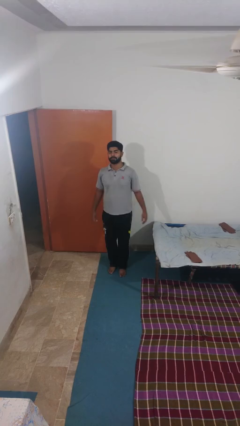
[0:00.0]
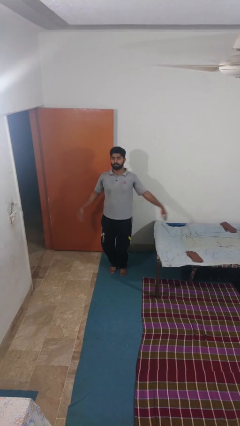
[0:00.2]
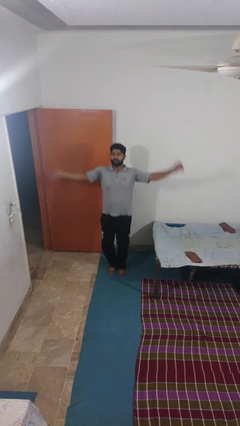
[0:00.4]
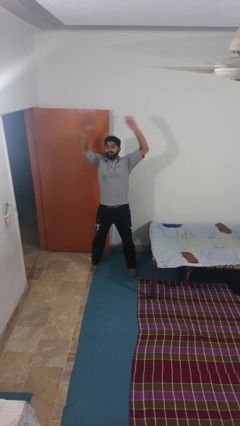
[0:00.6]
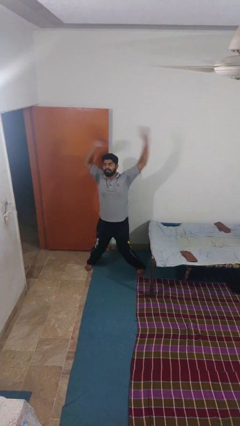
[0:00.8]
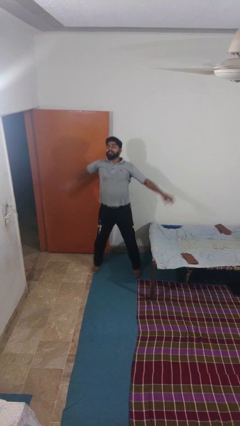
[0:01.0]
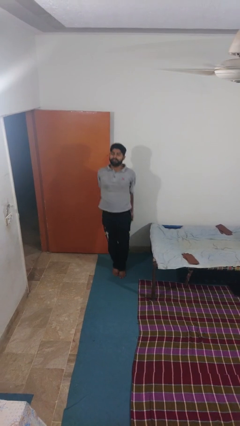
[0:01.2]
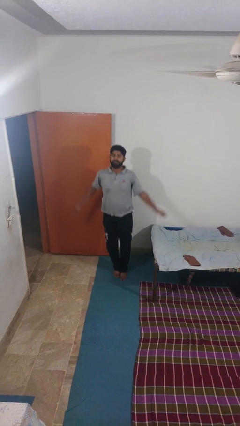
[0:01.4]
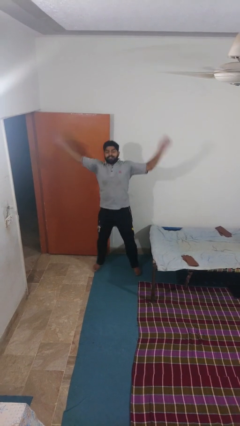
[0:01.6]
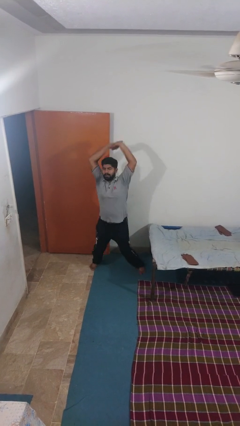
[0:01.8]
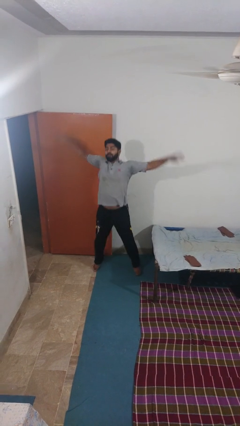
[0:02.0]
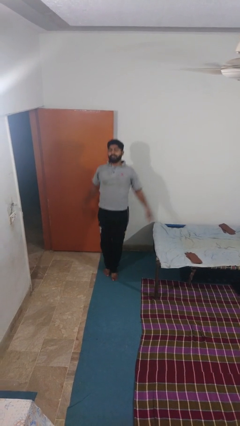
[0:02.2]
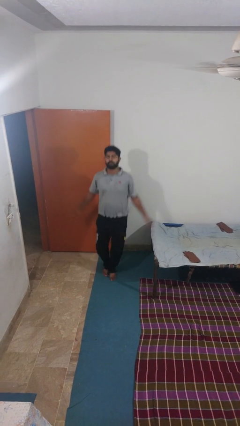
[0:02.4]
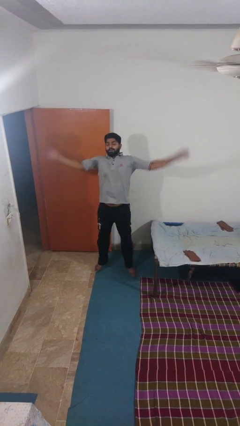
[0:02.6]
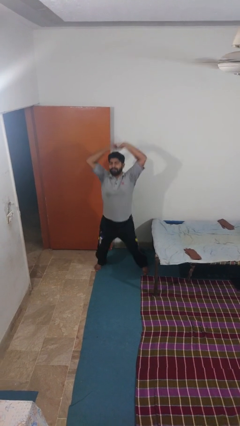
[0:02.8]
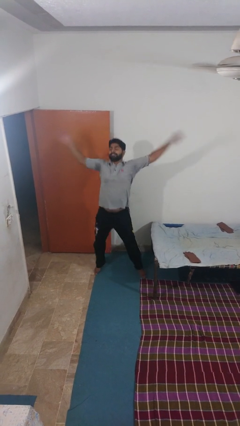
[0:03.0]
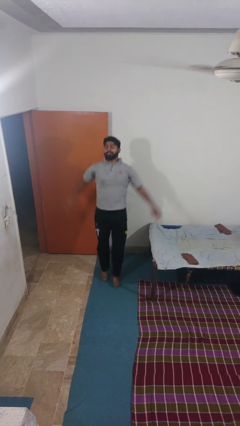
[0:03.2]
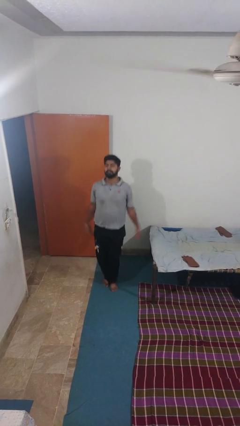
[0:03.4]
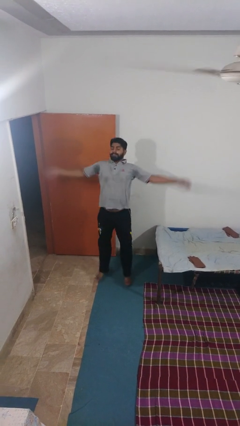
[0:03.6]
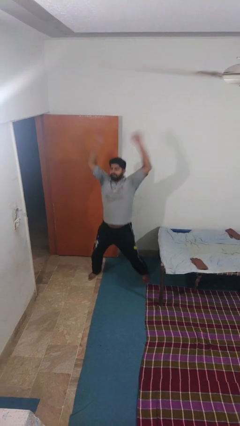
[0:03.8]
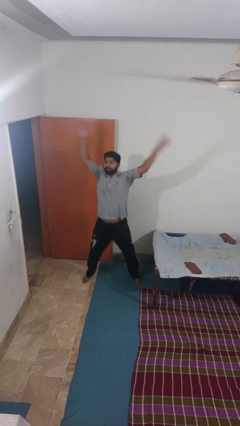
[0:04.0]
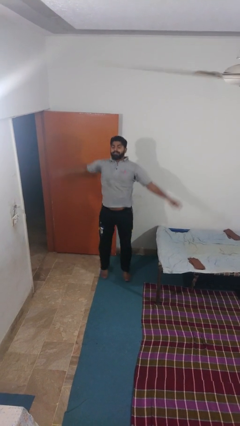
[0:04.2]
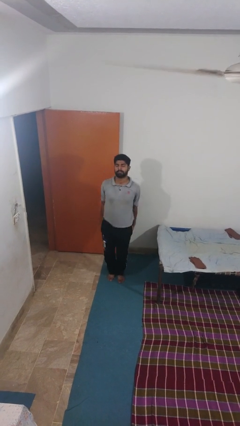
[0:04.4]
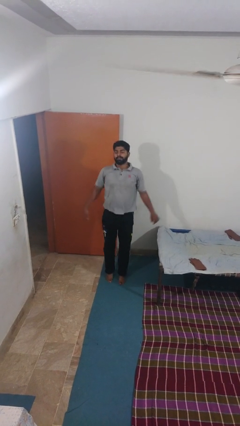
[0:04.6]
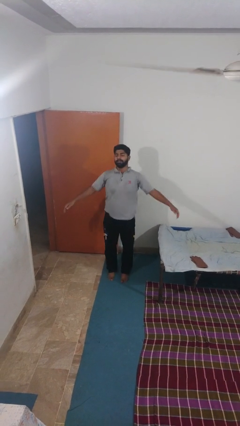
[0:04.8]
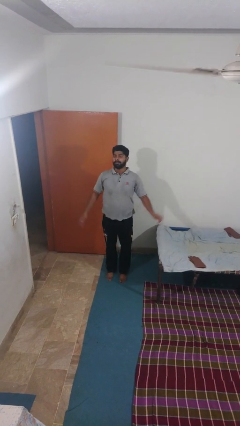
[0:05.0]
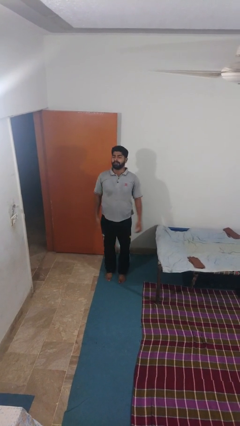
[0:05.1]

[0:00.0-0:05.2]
person exercises with jumping jacks

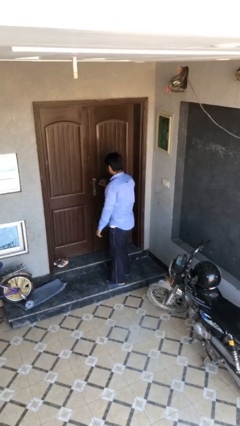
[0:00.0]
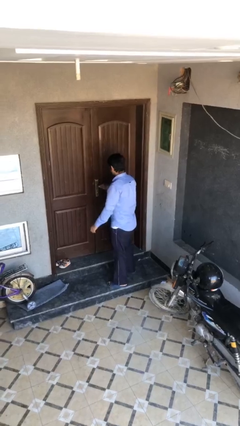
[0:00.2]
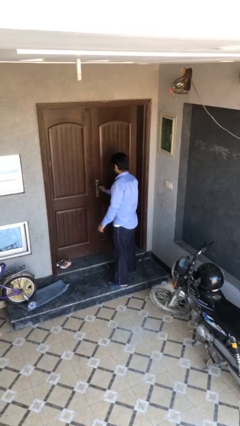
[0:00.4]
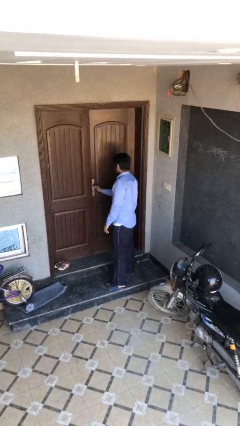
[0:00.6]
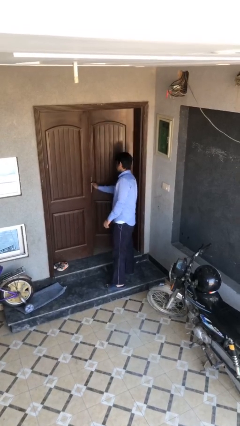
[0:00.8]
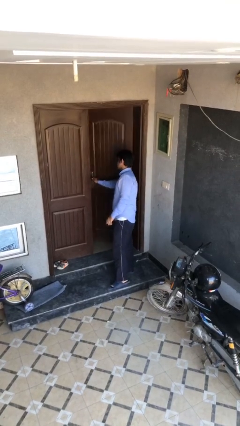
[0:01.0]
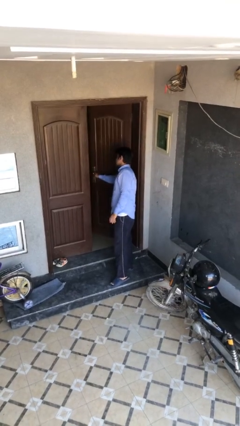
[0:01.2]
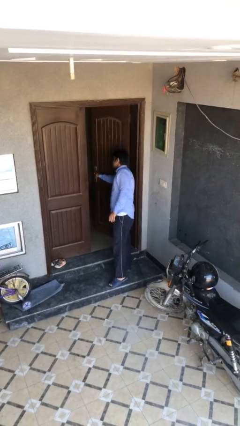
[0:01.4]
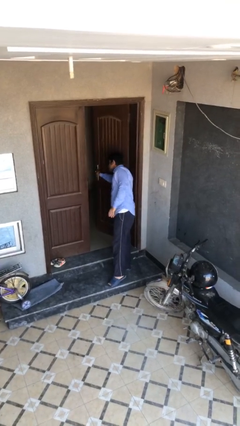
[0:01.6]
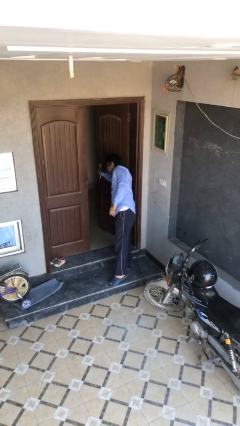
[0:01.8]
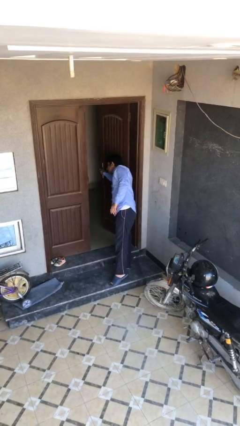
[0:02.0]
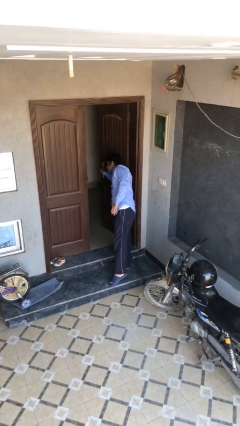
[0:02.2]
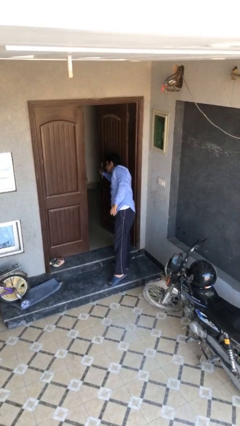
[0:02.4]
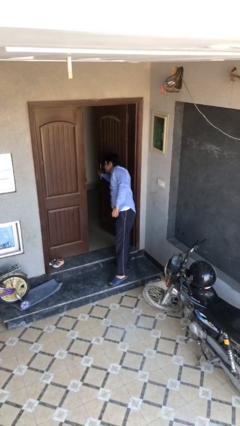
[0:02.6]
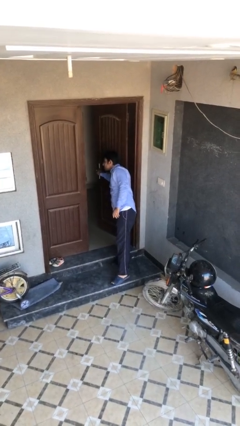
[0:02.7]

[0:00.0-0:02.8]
person opens facility door

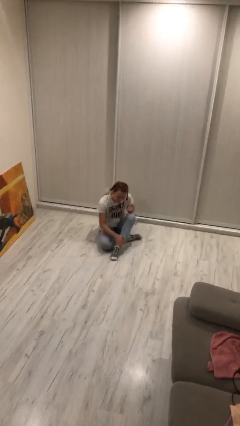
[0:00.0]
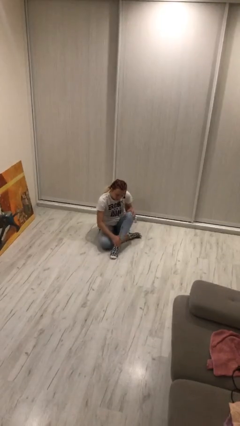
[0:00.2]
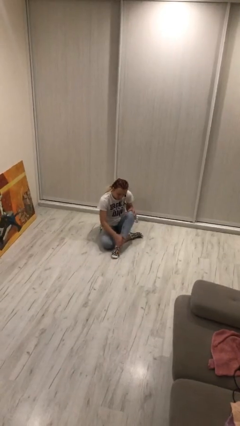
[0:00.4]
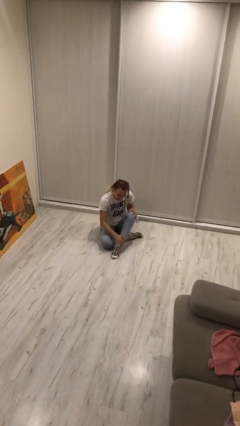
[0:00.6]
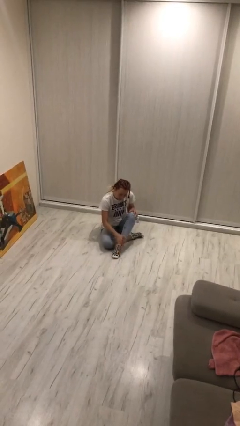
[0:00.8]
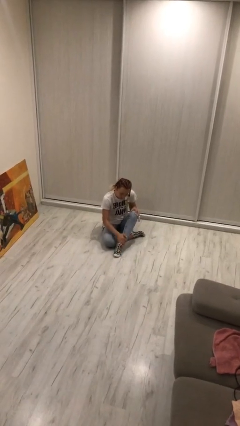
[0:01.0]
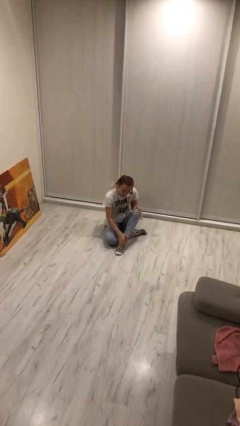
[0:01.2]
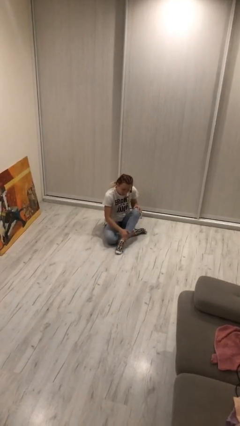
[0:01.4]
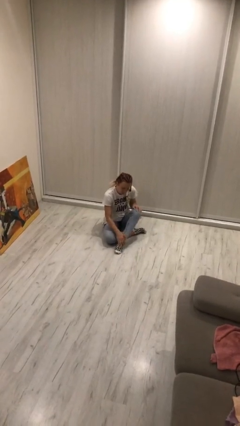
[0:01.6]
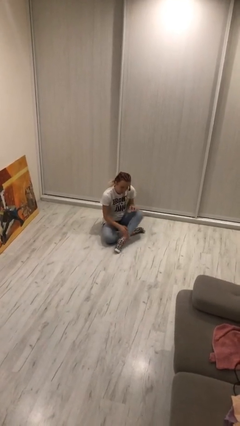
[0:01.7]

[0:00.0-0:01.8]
person rubs foot

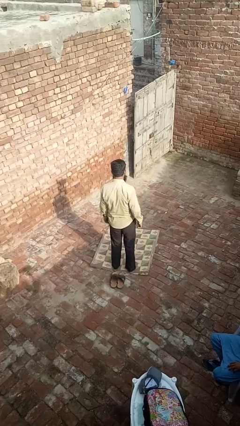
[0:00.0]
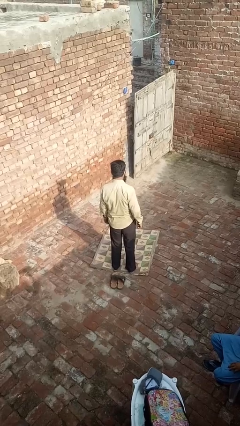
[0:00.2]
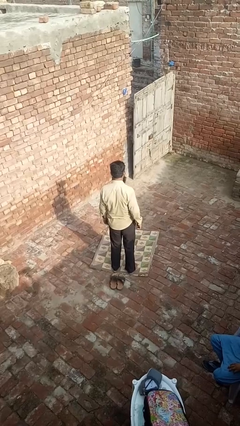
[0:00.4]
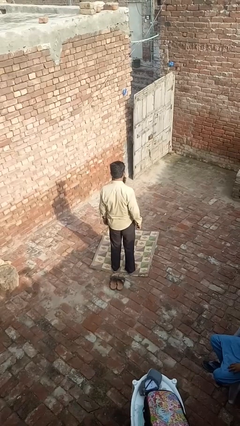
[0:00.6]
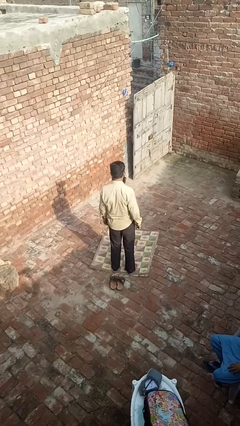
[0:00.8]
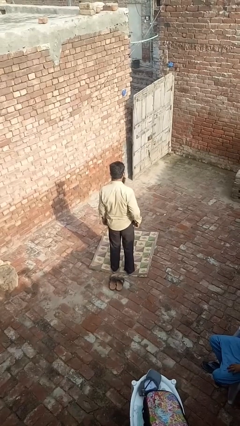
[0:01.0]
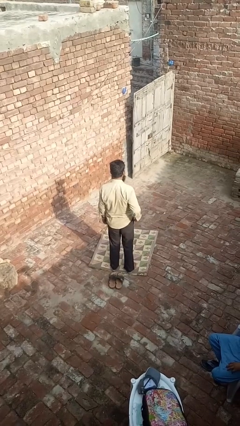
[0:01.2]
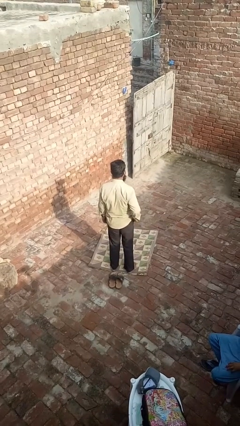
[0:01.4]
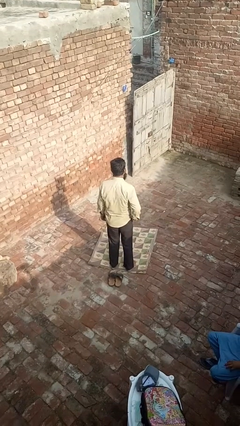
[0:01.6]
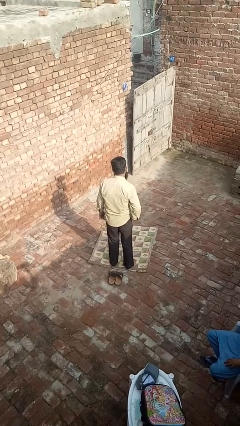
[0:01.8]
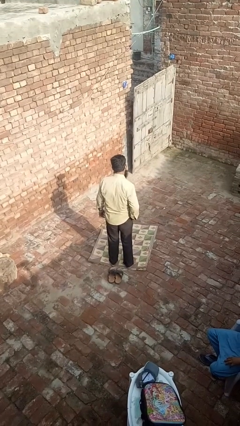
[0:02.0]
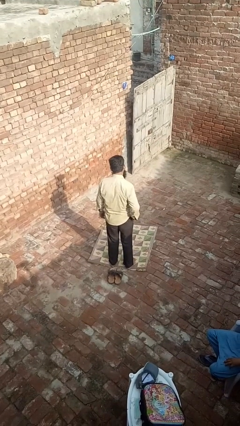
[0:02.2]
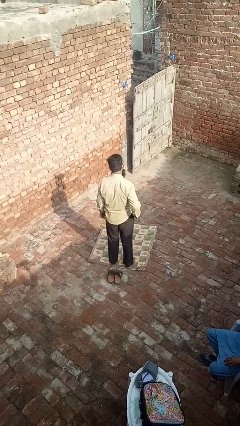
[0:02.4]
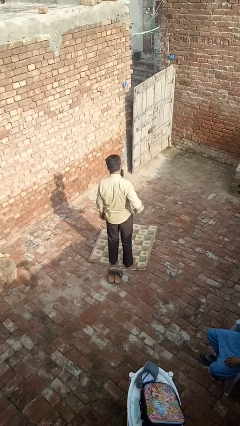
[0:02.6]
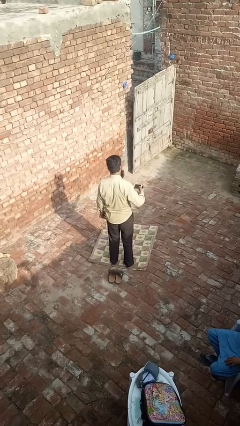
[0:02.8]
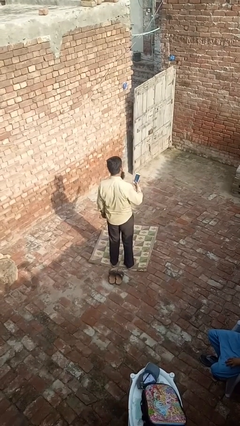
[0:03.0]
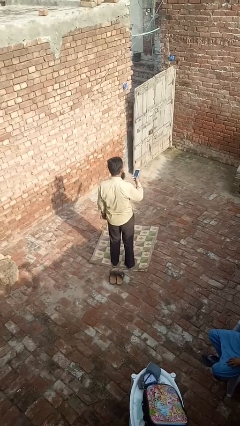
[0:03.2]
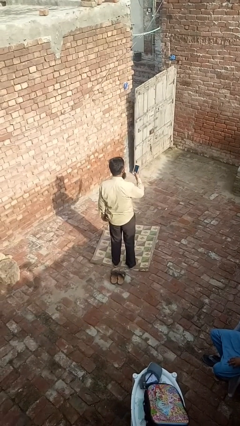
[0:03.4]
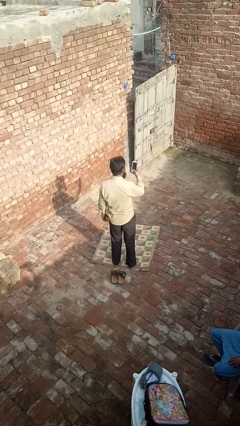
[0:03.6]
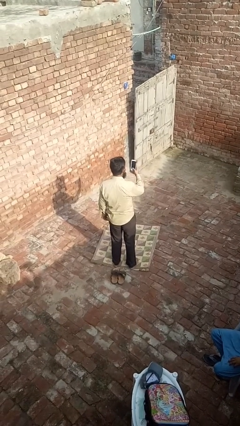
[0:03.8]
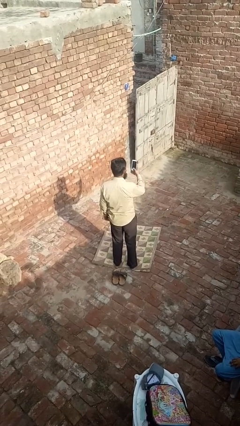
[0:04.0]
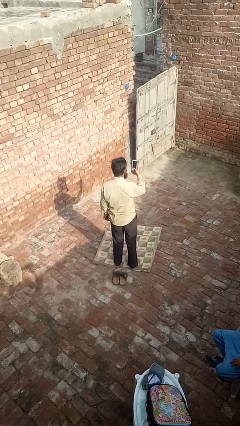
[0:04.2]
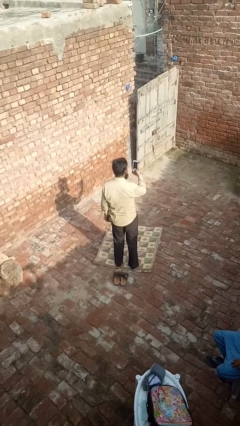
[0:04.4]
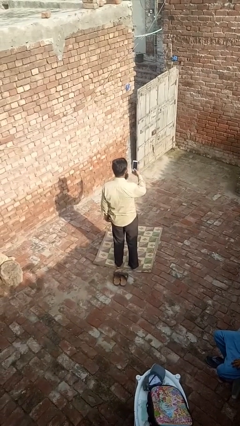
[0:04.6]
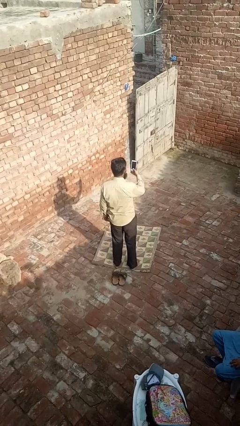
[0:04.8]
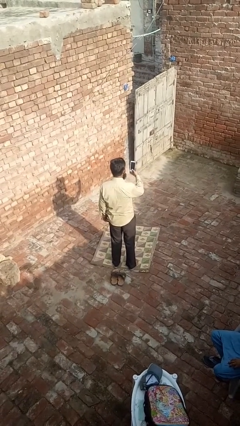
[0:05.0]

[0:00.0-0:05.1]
person takes phone from pocket

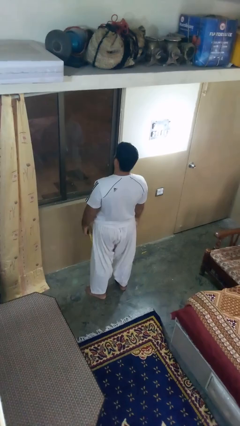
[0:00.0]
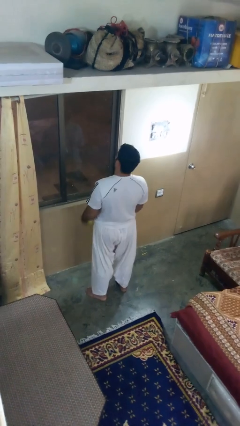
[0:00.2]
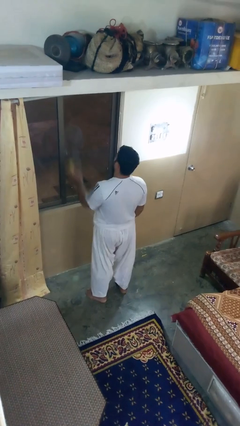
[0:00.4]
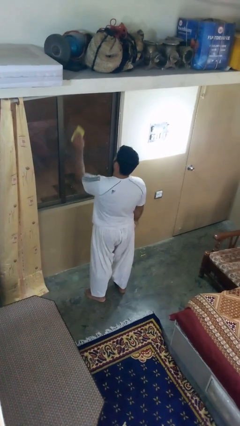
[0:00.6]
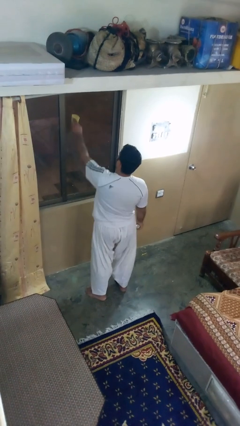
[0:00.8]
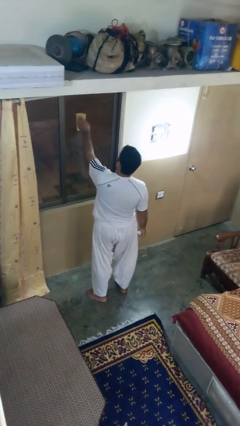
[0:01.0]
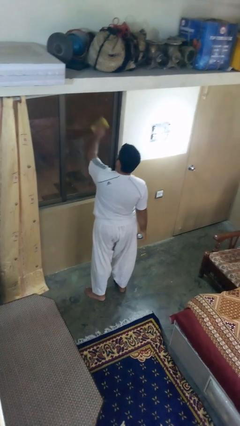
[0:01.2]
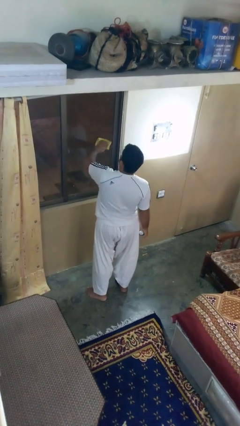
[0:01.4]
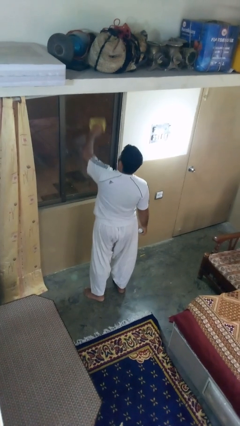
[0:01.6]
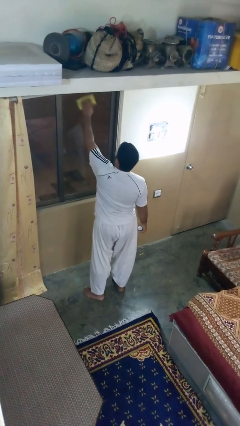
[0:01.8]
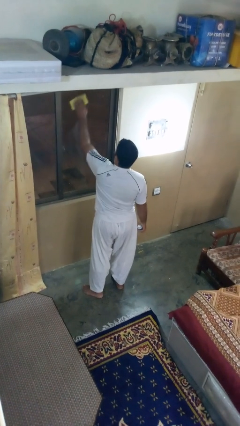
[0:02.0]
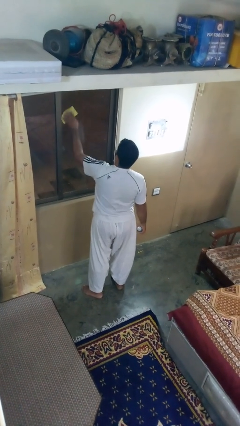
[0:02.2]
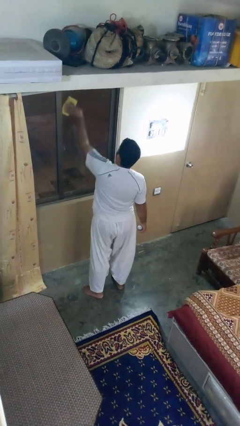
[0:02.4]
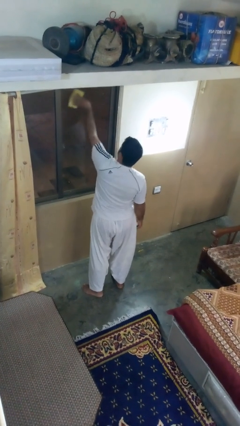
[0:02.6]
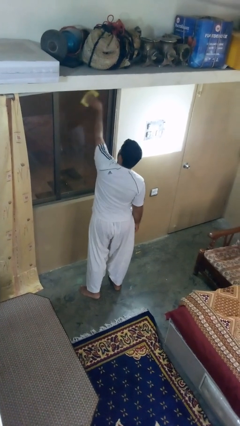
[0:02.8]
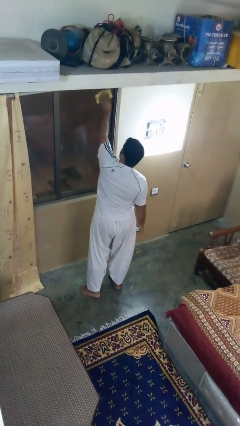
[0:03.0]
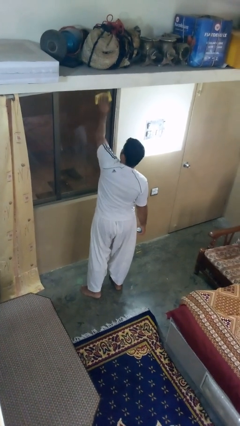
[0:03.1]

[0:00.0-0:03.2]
person washes window
